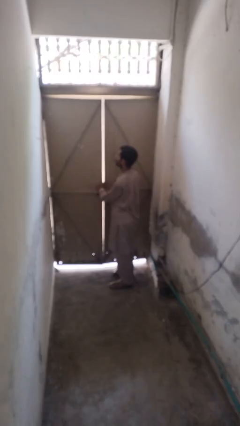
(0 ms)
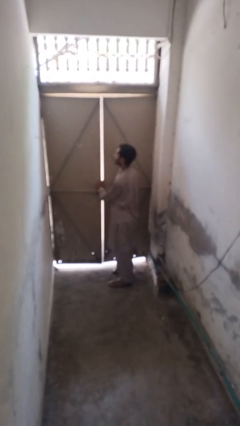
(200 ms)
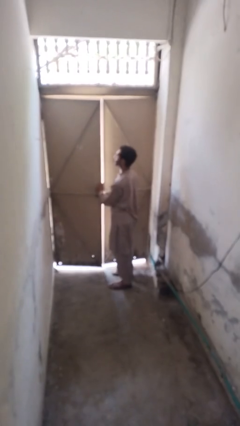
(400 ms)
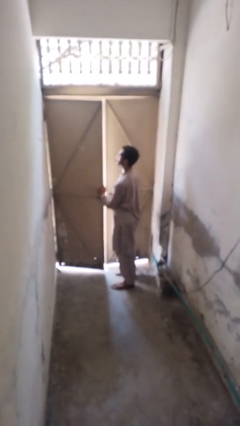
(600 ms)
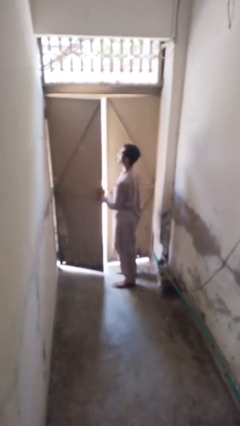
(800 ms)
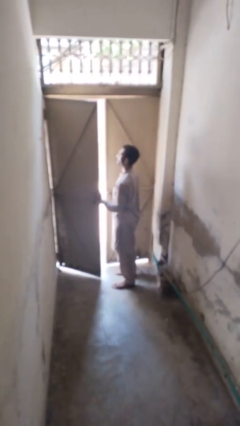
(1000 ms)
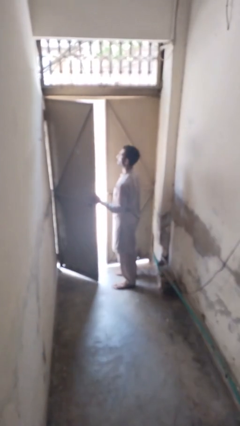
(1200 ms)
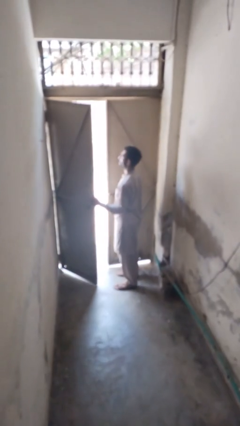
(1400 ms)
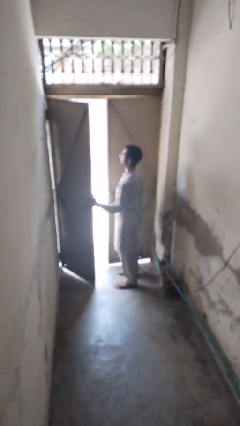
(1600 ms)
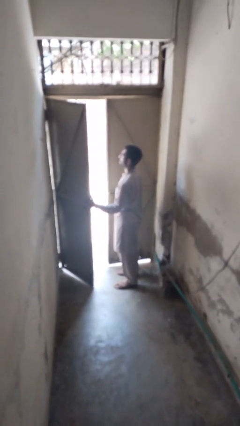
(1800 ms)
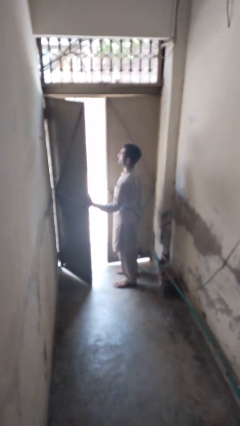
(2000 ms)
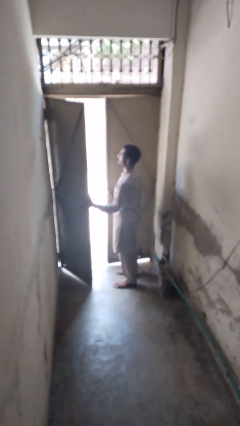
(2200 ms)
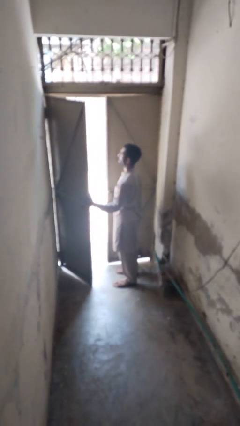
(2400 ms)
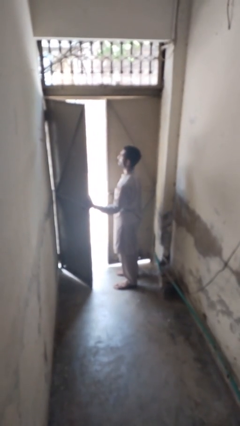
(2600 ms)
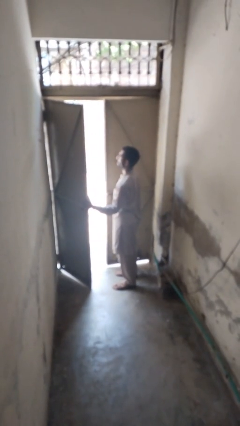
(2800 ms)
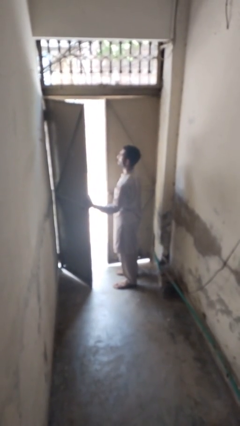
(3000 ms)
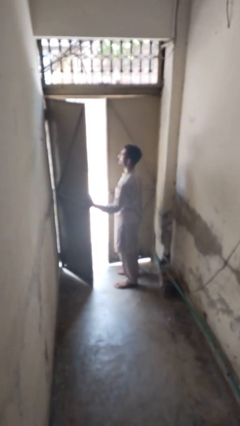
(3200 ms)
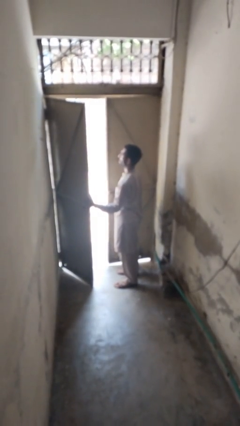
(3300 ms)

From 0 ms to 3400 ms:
person opens gate

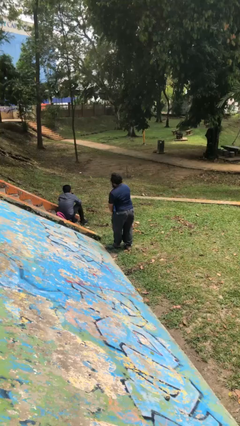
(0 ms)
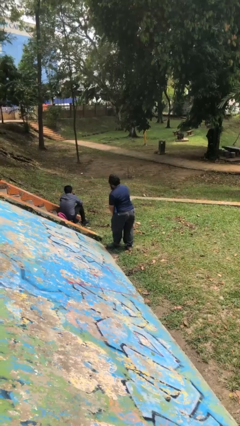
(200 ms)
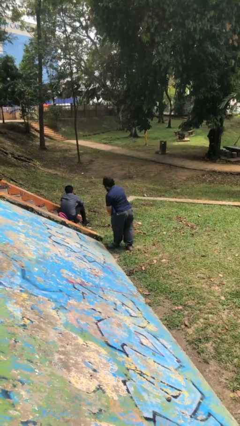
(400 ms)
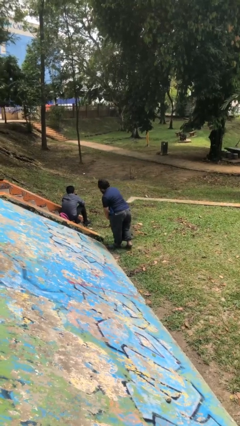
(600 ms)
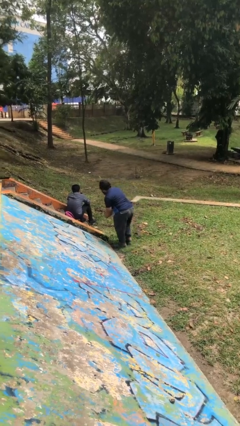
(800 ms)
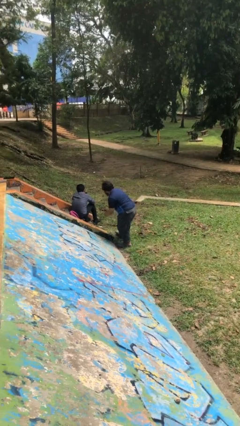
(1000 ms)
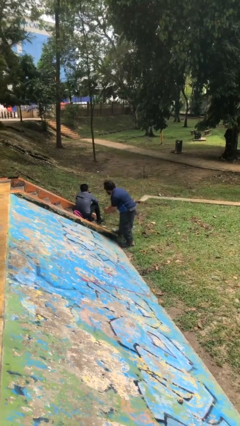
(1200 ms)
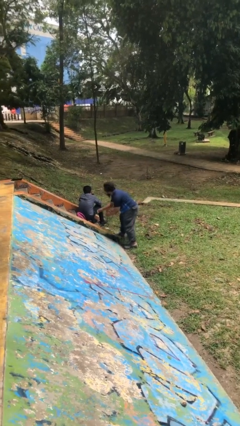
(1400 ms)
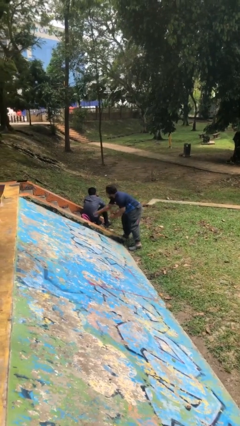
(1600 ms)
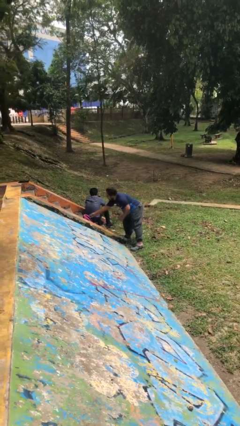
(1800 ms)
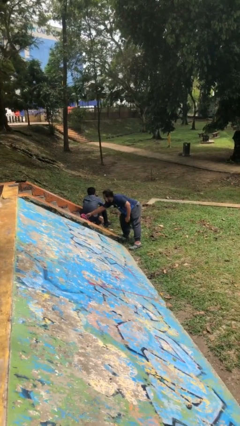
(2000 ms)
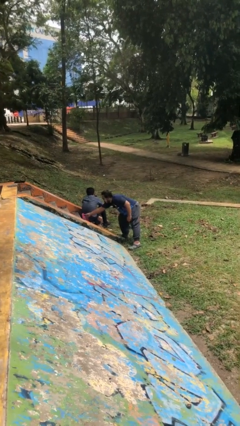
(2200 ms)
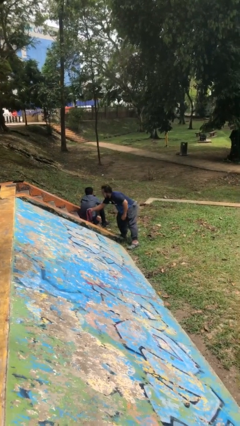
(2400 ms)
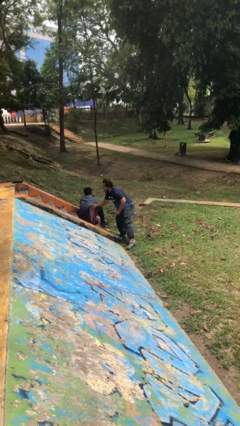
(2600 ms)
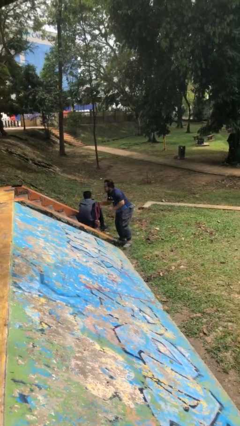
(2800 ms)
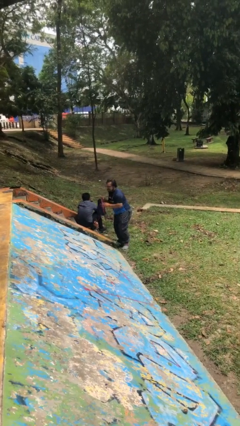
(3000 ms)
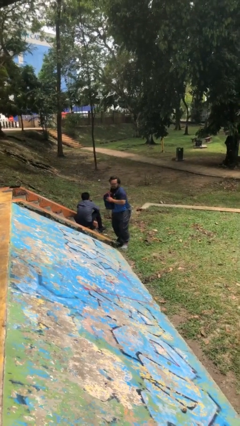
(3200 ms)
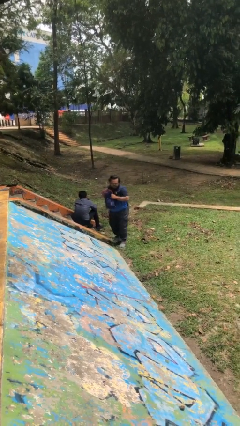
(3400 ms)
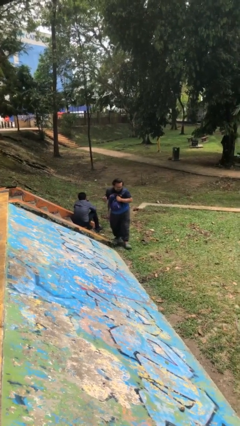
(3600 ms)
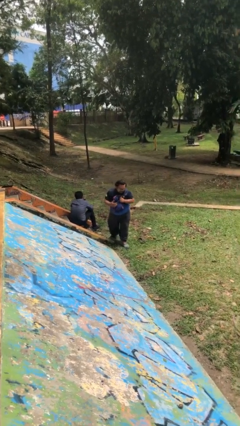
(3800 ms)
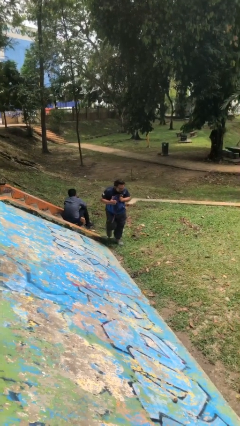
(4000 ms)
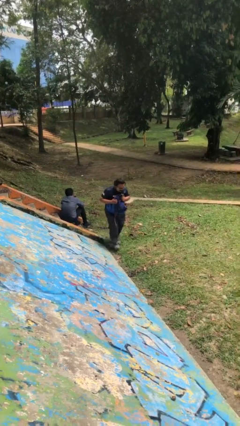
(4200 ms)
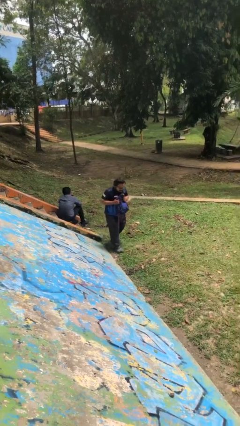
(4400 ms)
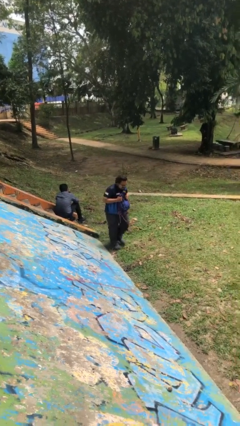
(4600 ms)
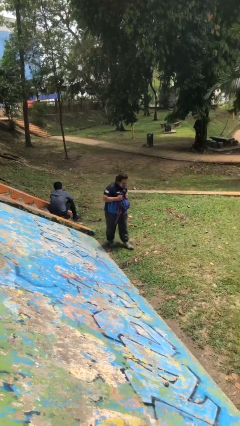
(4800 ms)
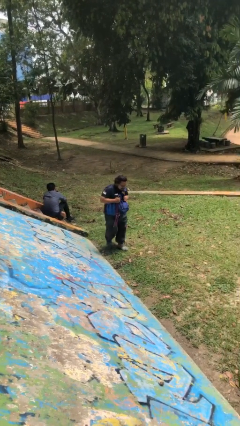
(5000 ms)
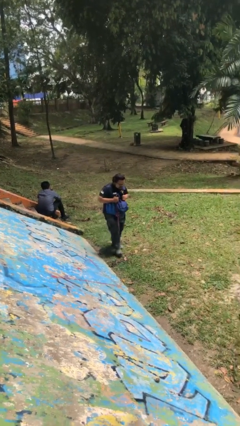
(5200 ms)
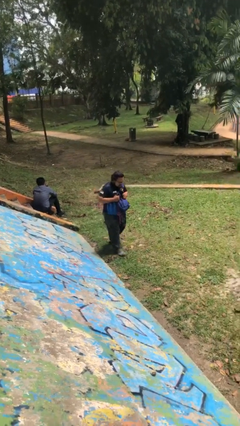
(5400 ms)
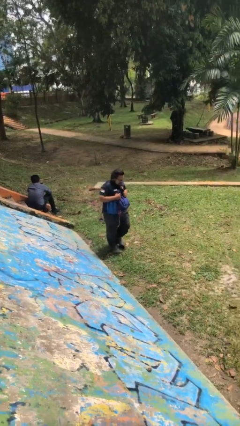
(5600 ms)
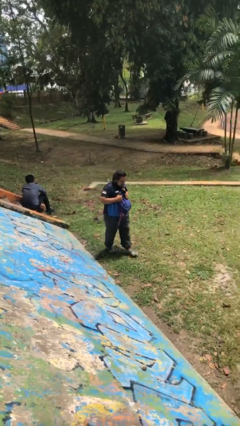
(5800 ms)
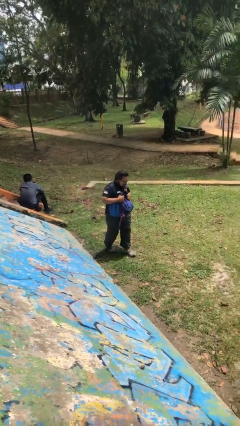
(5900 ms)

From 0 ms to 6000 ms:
person steals object from person

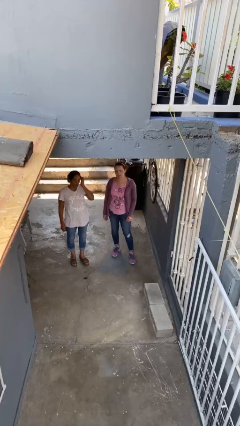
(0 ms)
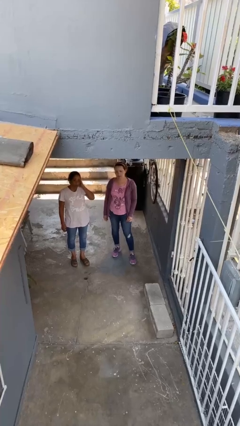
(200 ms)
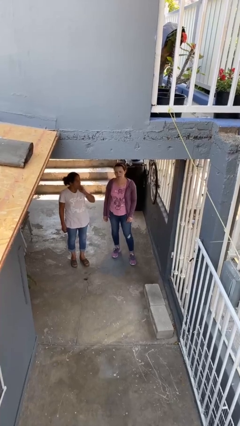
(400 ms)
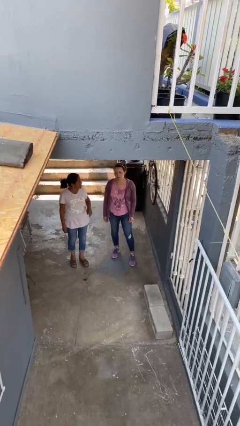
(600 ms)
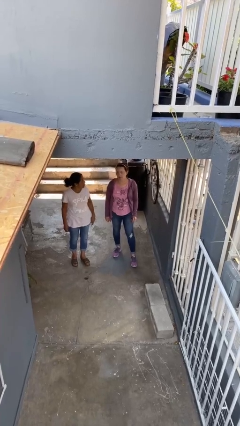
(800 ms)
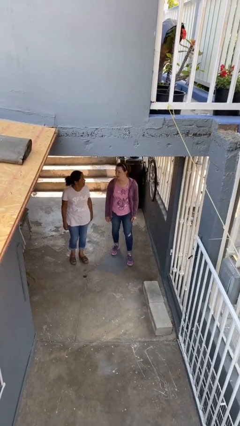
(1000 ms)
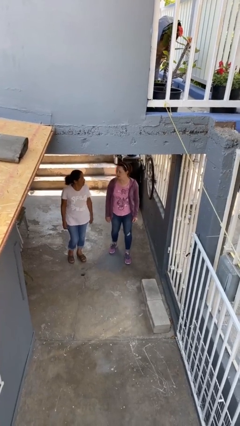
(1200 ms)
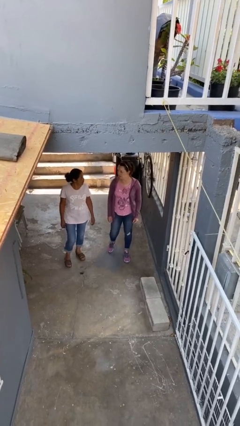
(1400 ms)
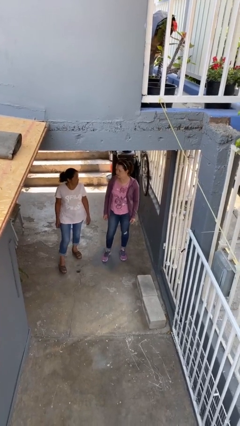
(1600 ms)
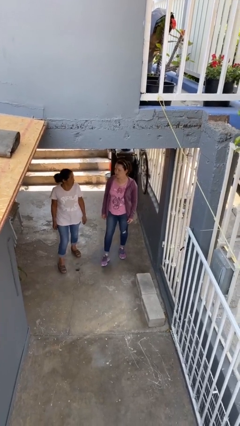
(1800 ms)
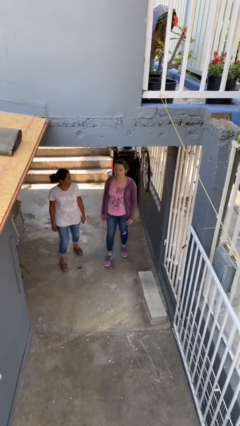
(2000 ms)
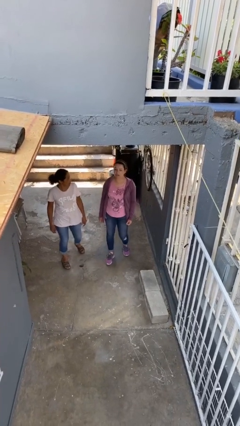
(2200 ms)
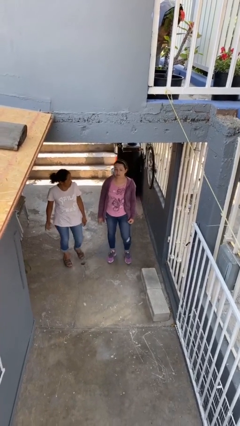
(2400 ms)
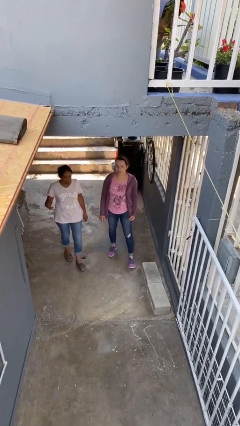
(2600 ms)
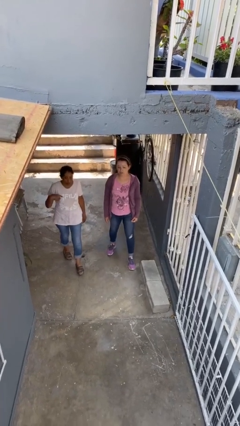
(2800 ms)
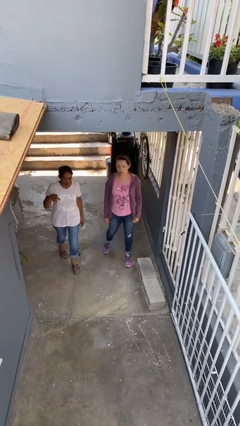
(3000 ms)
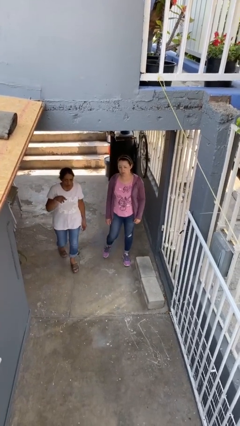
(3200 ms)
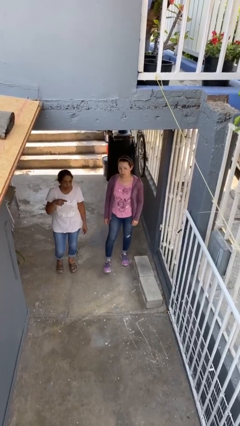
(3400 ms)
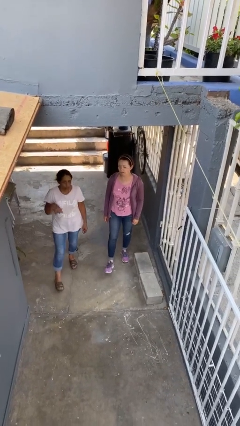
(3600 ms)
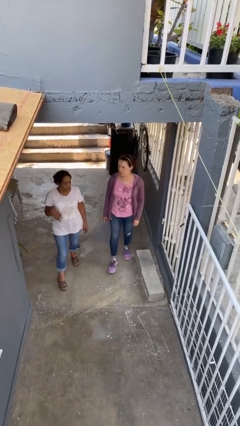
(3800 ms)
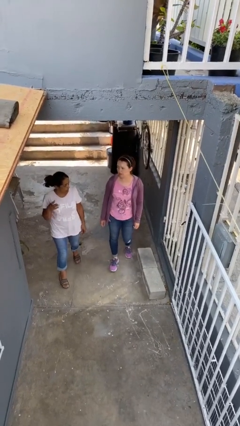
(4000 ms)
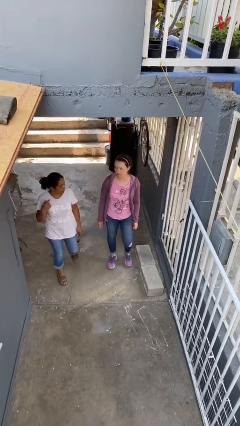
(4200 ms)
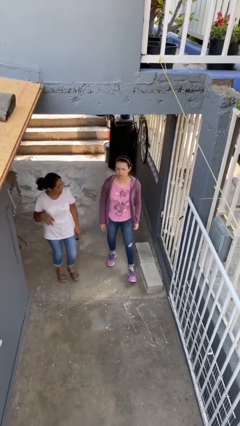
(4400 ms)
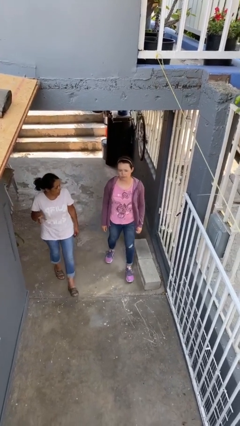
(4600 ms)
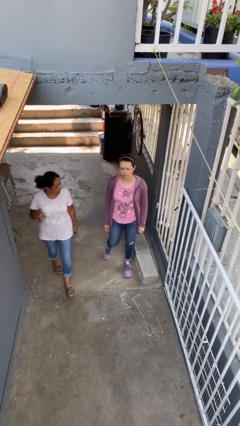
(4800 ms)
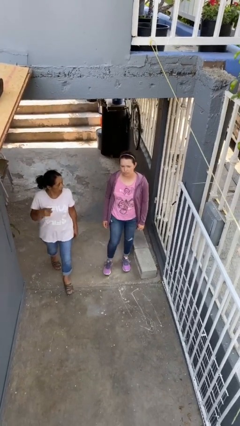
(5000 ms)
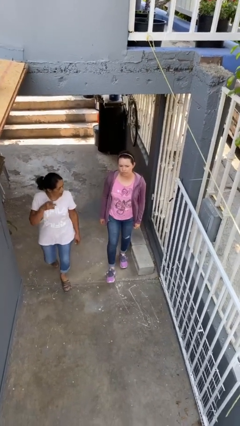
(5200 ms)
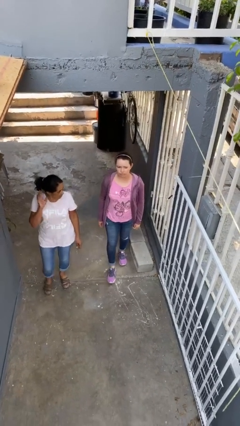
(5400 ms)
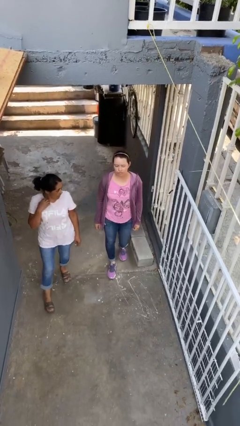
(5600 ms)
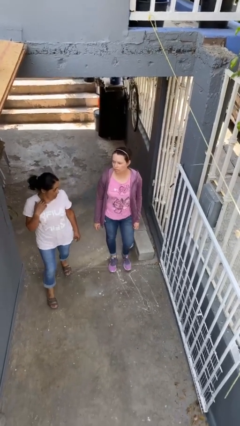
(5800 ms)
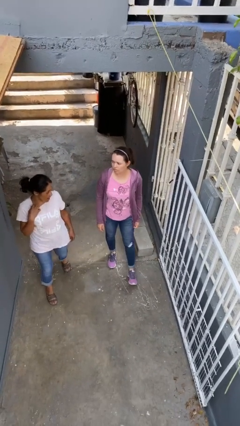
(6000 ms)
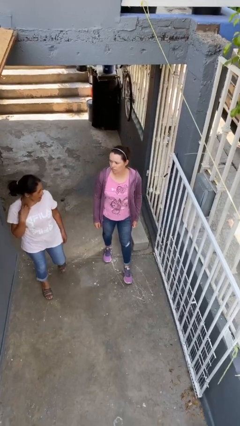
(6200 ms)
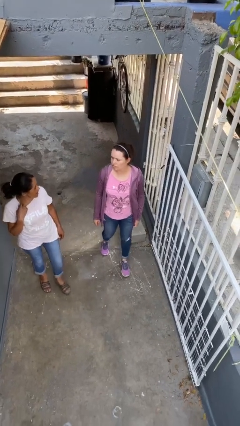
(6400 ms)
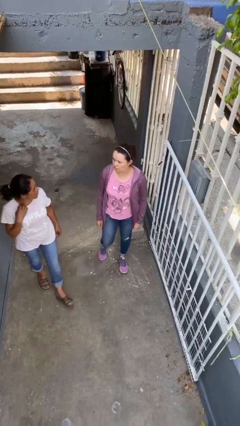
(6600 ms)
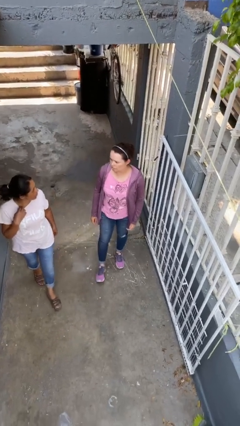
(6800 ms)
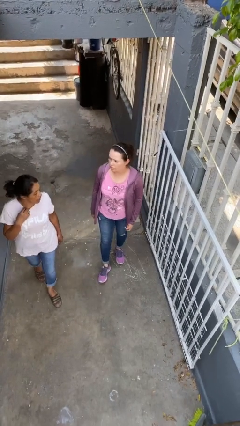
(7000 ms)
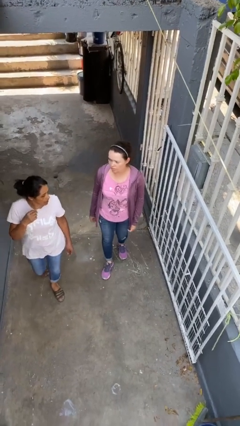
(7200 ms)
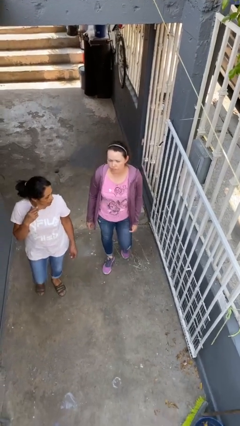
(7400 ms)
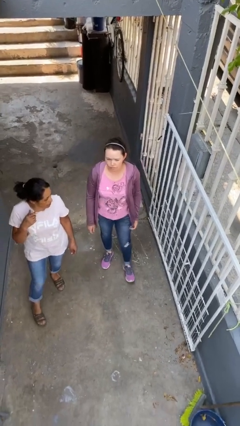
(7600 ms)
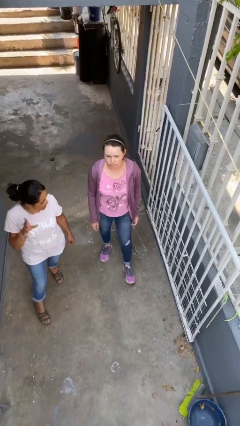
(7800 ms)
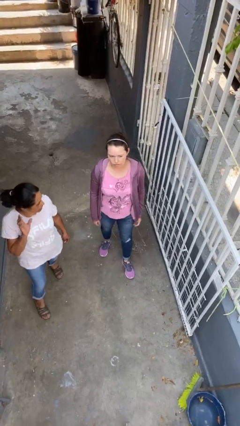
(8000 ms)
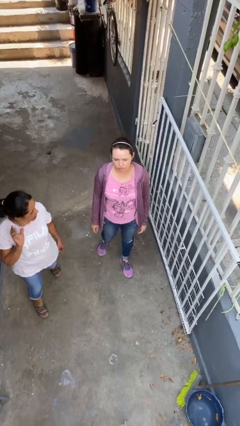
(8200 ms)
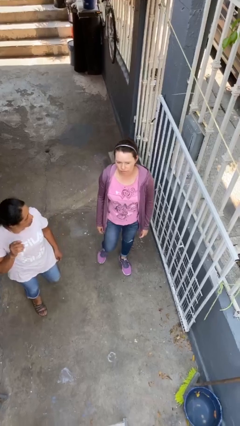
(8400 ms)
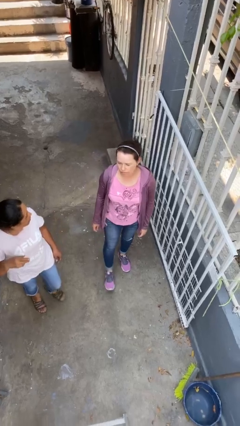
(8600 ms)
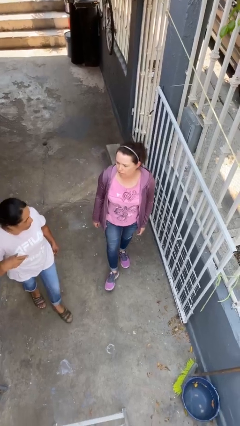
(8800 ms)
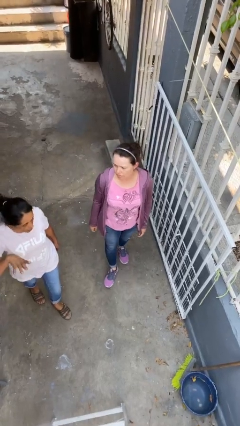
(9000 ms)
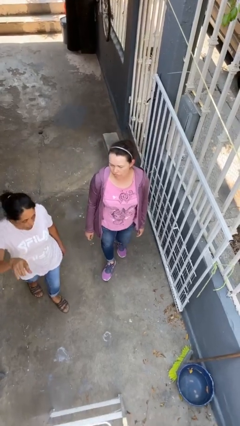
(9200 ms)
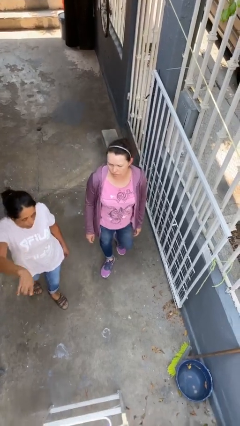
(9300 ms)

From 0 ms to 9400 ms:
person talks to person
